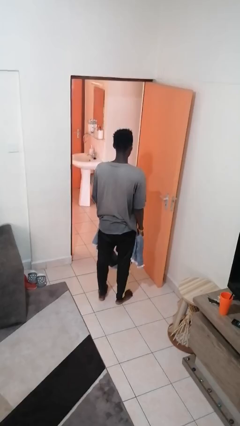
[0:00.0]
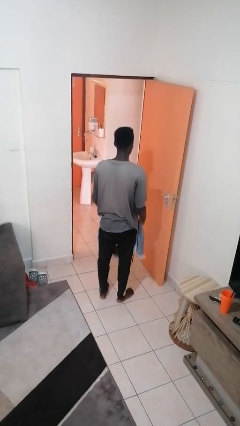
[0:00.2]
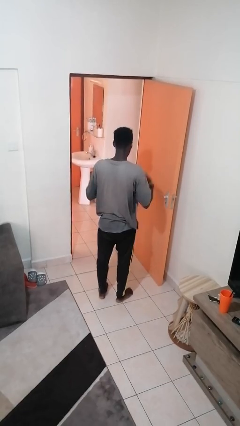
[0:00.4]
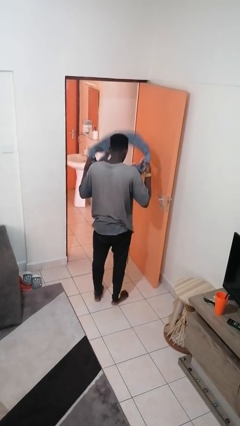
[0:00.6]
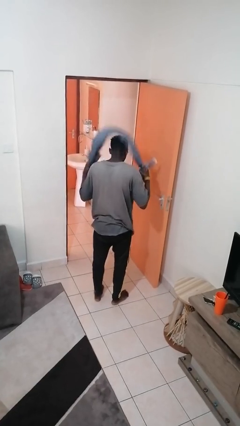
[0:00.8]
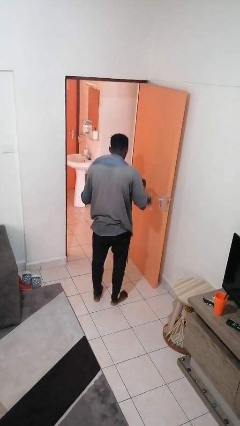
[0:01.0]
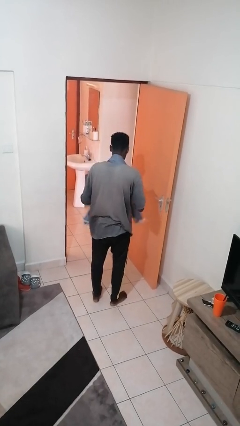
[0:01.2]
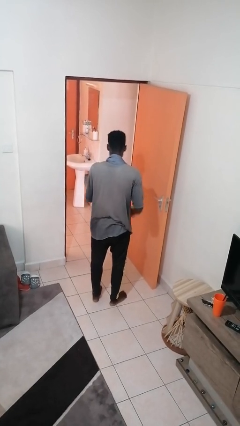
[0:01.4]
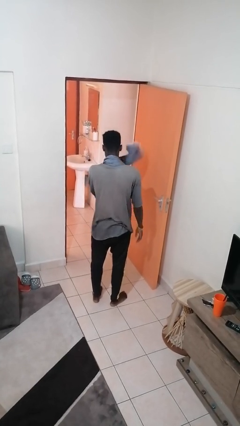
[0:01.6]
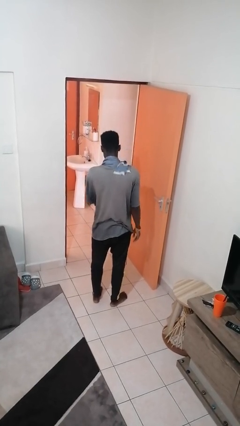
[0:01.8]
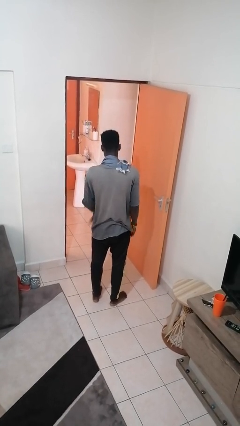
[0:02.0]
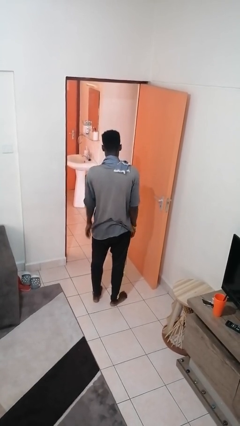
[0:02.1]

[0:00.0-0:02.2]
person puts on scarf

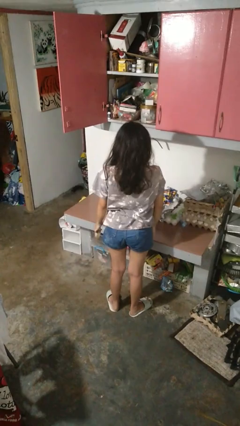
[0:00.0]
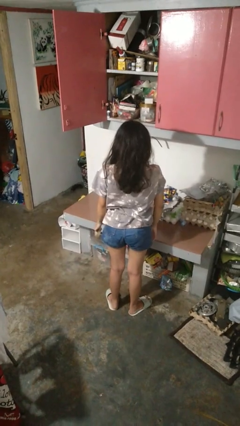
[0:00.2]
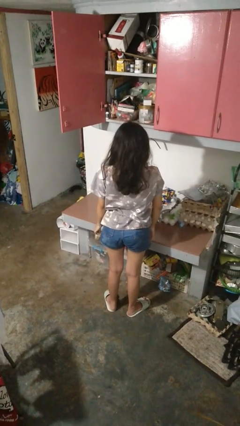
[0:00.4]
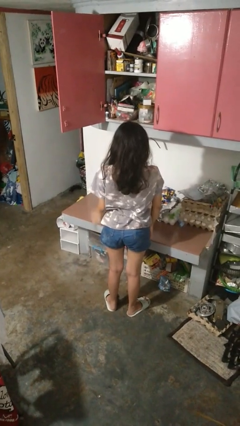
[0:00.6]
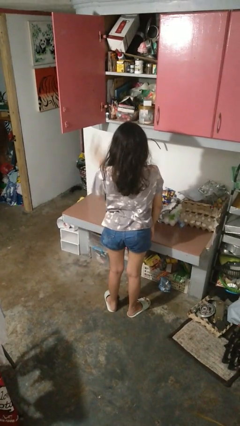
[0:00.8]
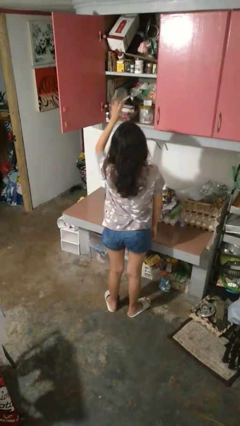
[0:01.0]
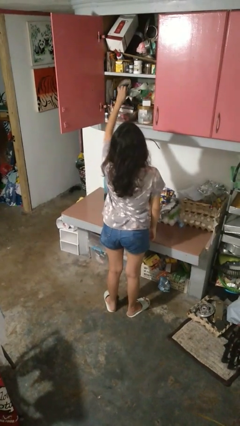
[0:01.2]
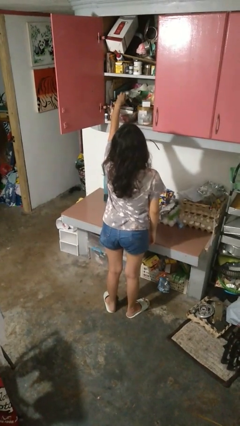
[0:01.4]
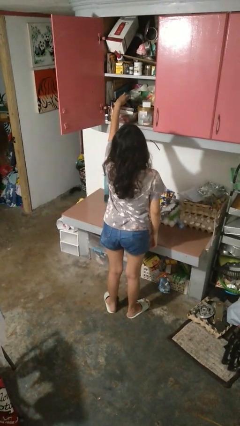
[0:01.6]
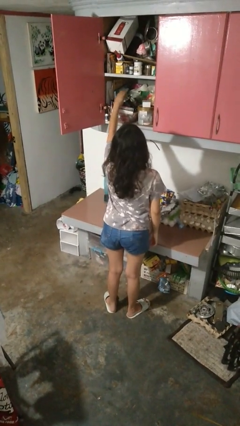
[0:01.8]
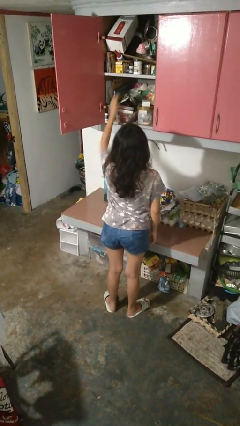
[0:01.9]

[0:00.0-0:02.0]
person puts object in cabinet

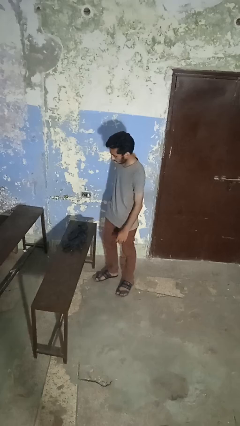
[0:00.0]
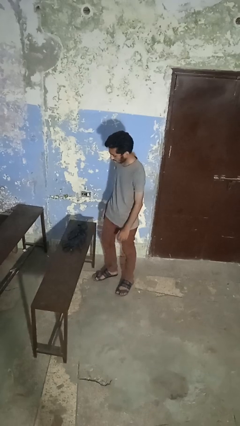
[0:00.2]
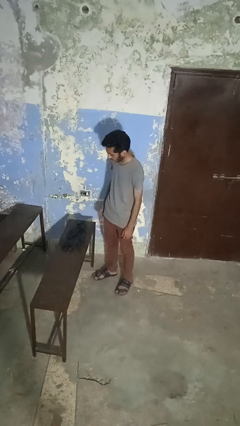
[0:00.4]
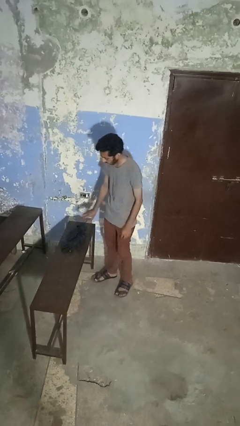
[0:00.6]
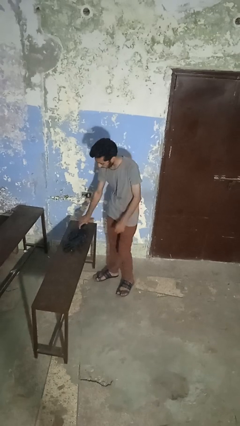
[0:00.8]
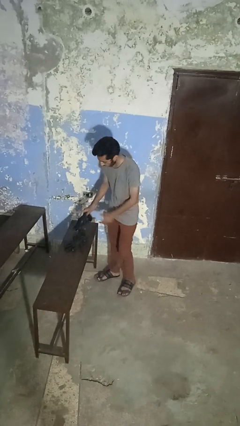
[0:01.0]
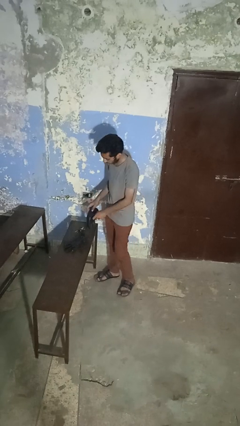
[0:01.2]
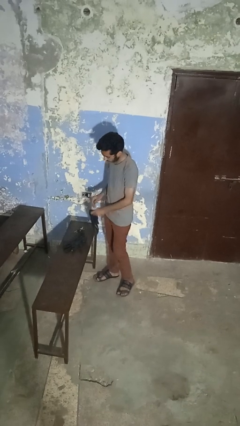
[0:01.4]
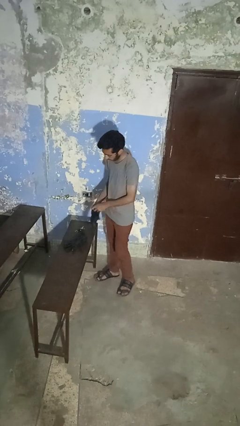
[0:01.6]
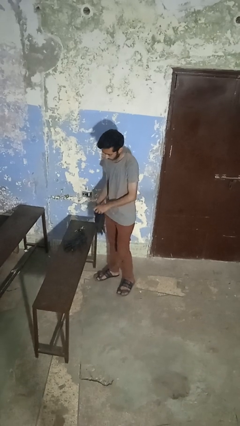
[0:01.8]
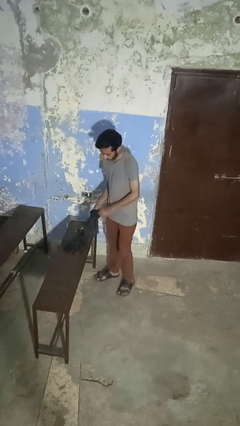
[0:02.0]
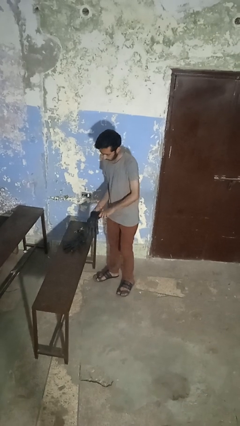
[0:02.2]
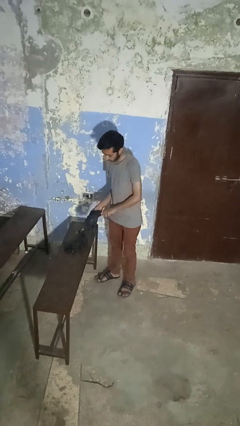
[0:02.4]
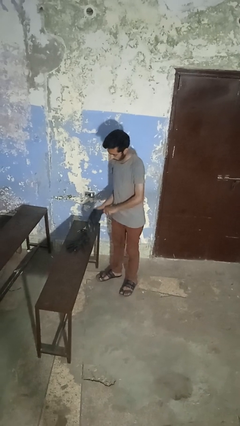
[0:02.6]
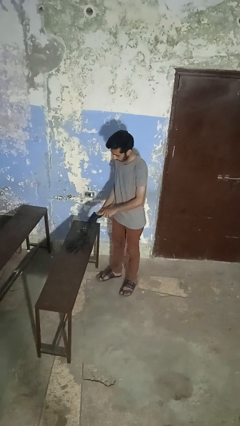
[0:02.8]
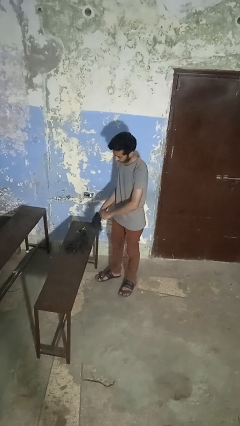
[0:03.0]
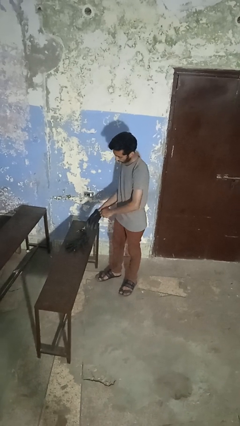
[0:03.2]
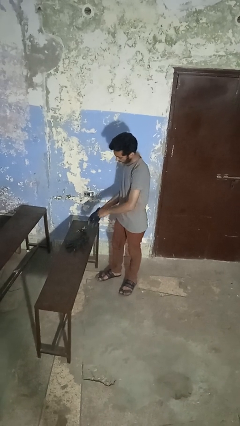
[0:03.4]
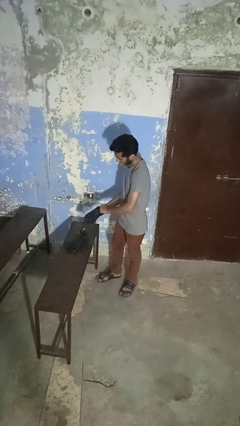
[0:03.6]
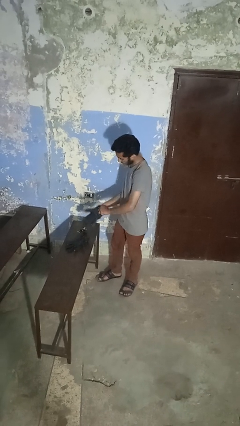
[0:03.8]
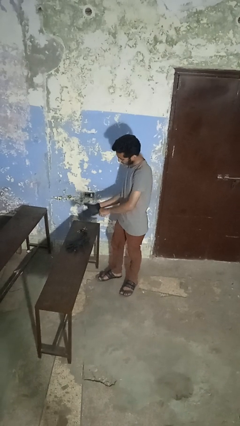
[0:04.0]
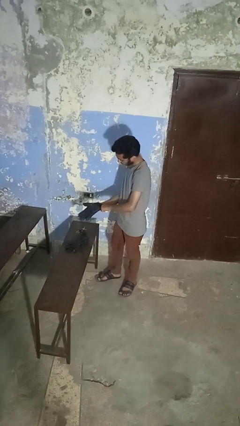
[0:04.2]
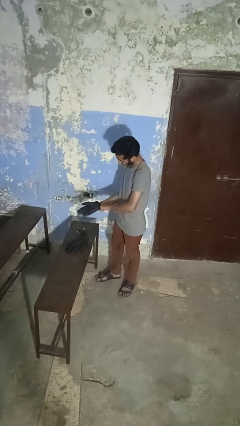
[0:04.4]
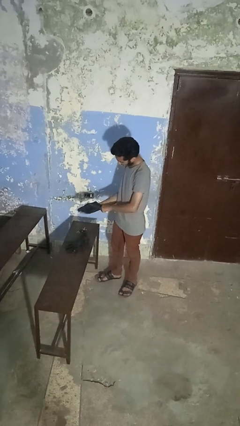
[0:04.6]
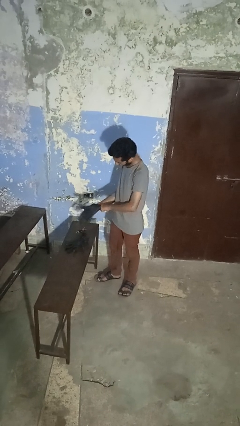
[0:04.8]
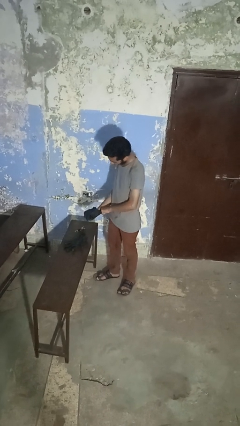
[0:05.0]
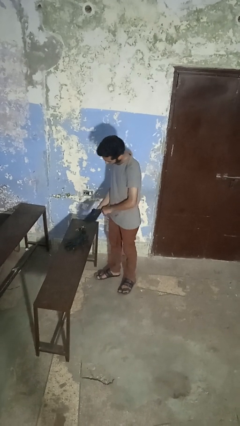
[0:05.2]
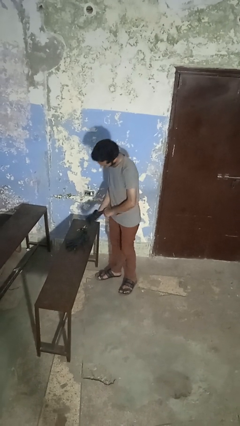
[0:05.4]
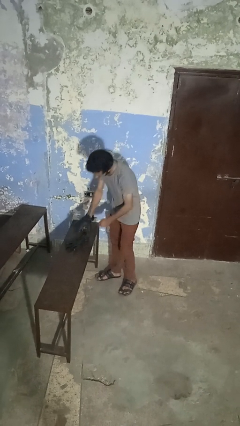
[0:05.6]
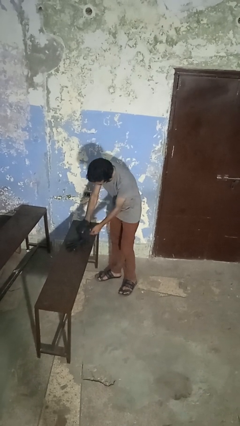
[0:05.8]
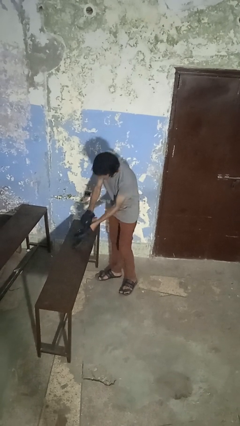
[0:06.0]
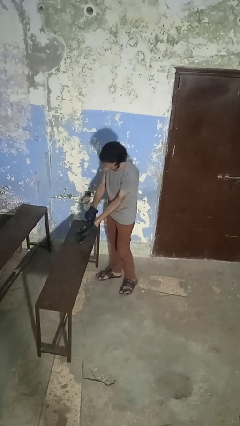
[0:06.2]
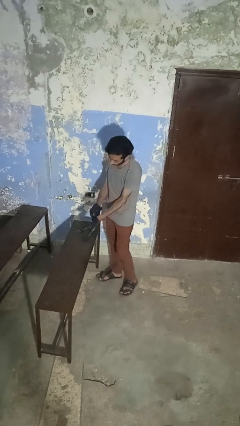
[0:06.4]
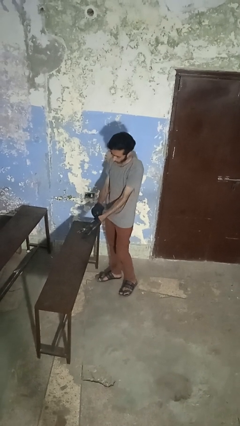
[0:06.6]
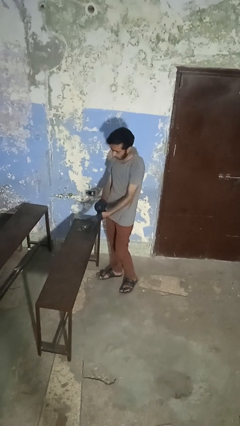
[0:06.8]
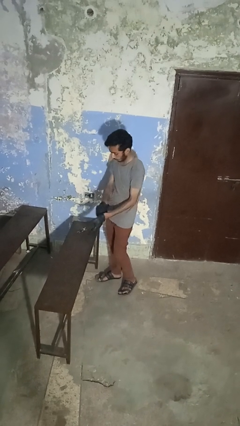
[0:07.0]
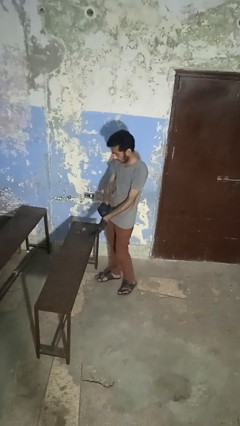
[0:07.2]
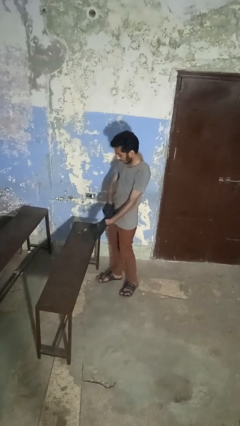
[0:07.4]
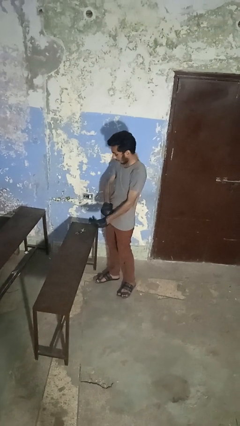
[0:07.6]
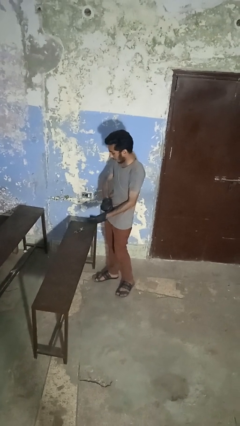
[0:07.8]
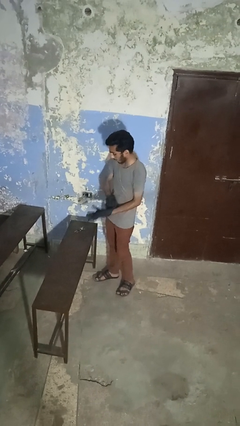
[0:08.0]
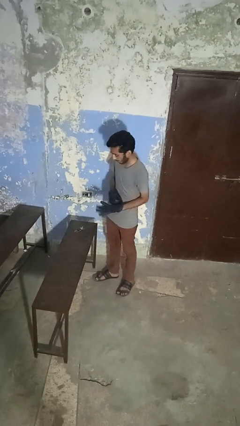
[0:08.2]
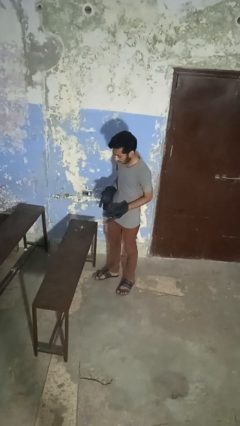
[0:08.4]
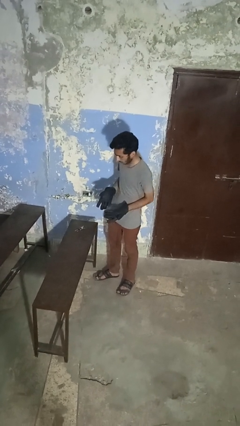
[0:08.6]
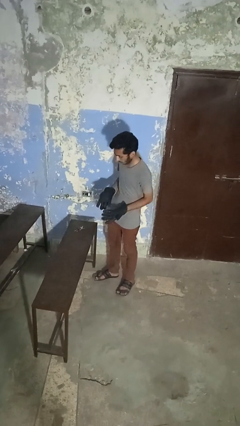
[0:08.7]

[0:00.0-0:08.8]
person puts on gloves

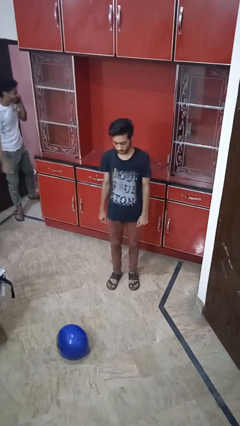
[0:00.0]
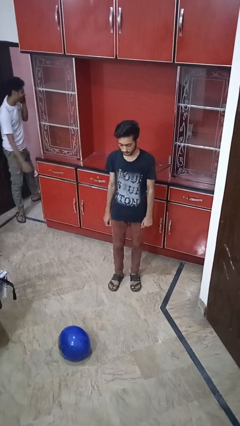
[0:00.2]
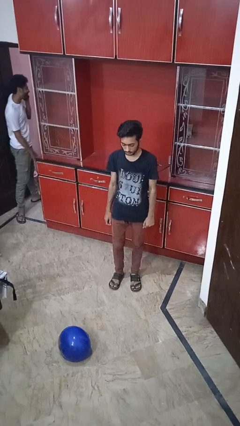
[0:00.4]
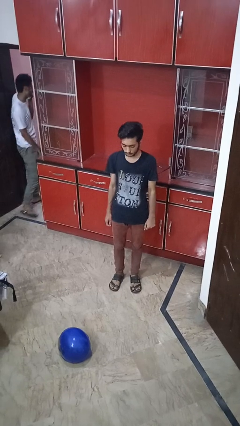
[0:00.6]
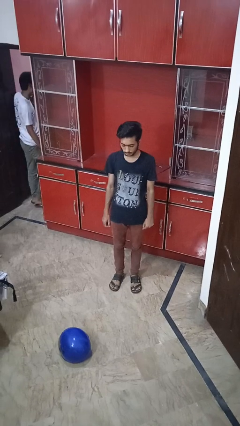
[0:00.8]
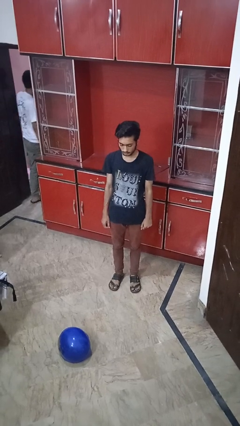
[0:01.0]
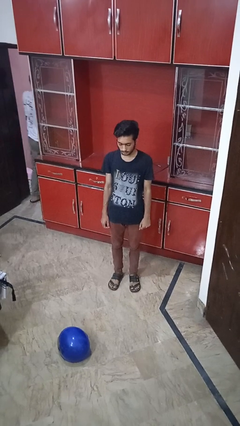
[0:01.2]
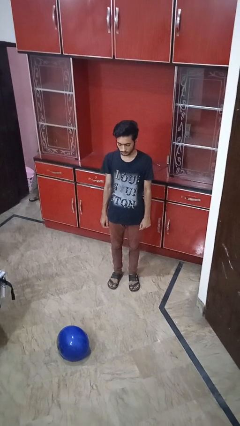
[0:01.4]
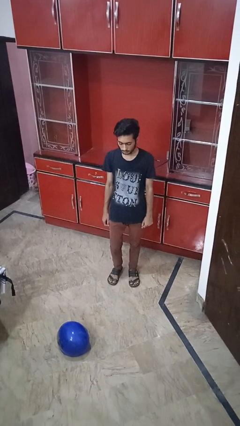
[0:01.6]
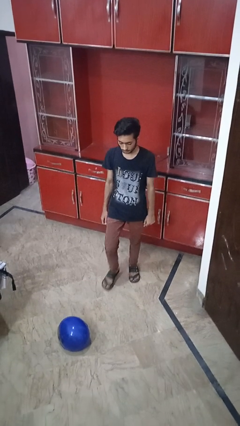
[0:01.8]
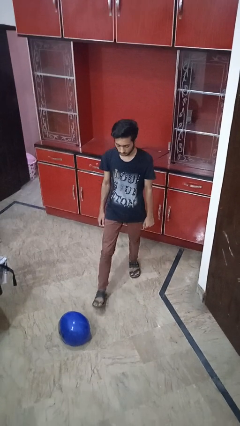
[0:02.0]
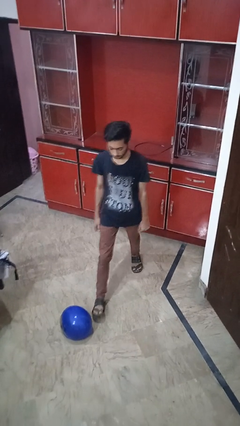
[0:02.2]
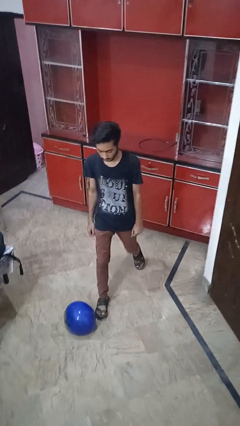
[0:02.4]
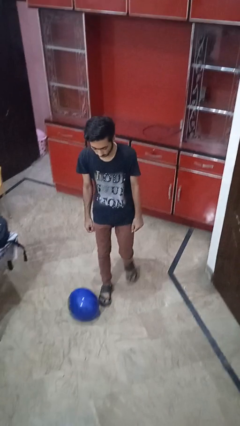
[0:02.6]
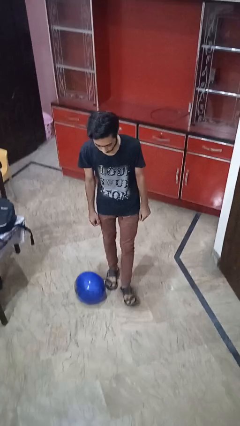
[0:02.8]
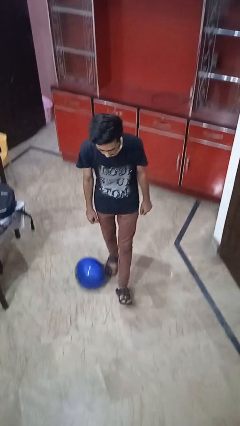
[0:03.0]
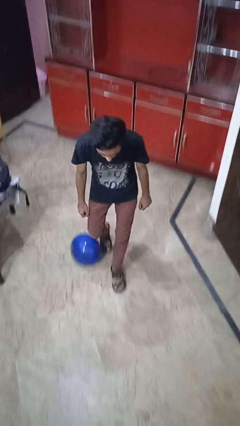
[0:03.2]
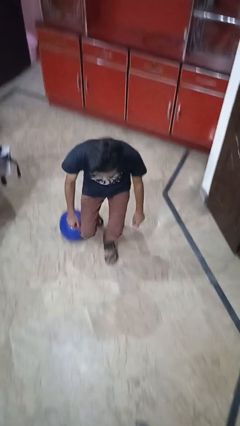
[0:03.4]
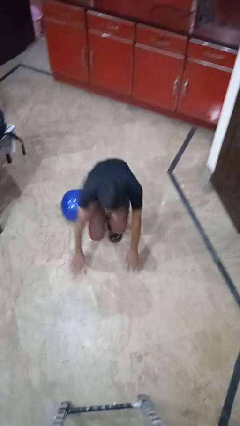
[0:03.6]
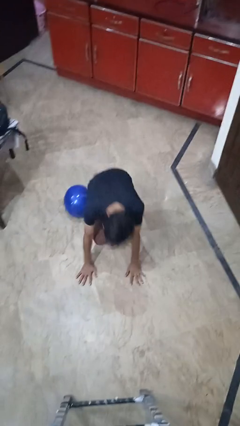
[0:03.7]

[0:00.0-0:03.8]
person takes phone from pocket

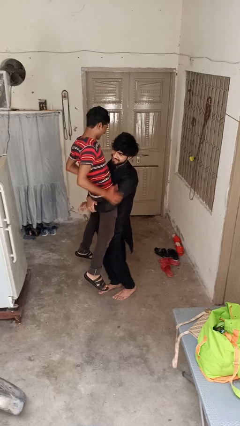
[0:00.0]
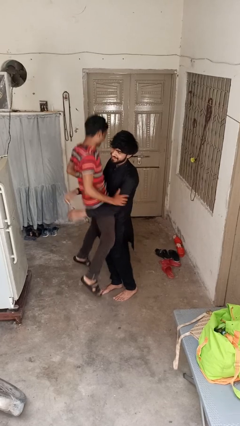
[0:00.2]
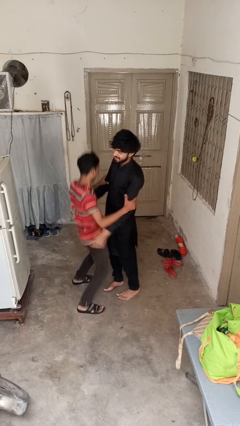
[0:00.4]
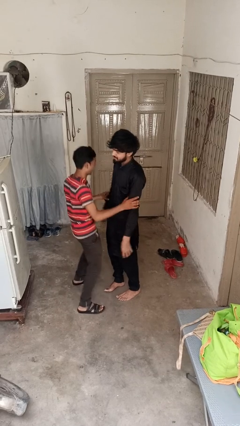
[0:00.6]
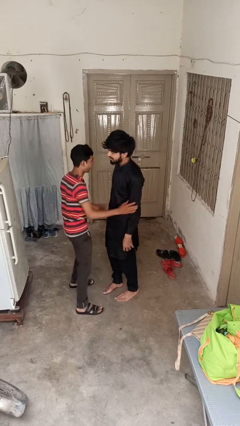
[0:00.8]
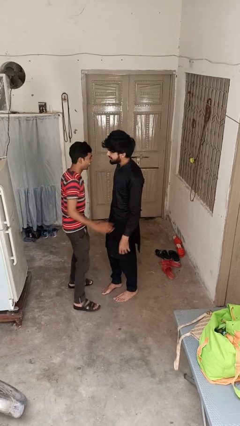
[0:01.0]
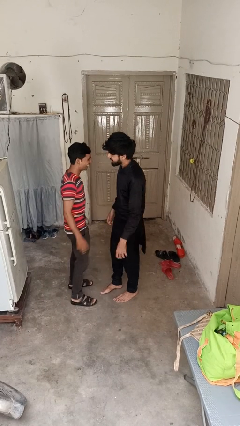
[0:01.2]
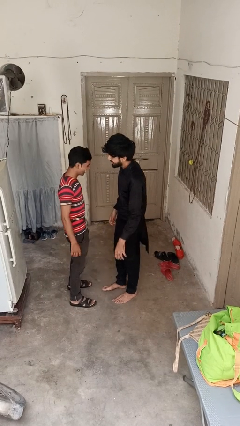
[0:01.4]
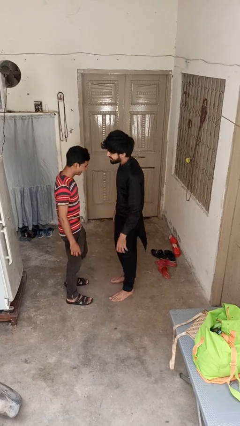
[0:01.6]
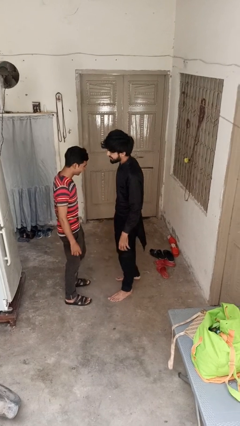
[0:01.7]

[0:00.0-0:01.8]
person puts down person
